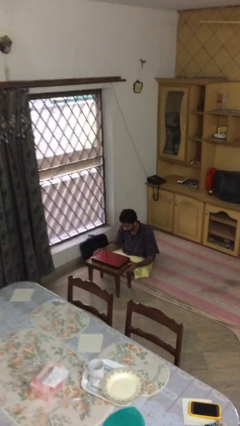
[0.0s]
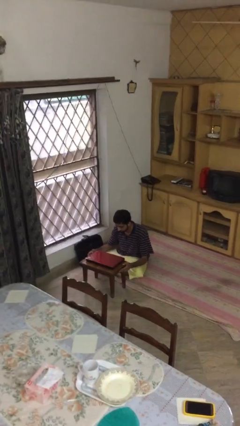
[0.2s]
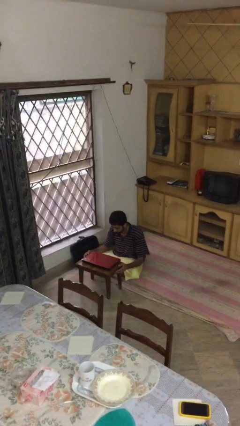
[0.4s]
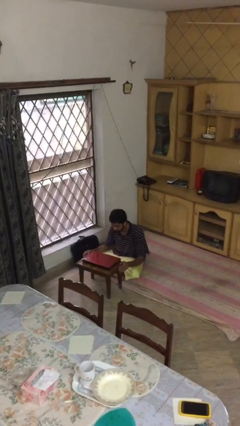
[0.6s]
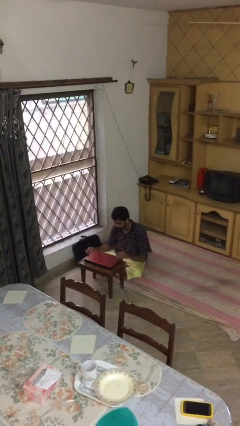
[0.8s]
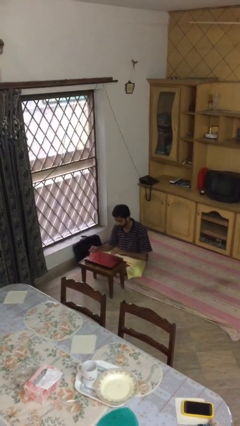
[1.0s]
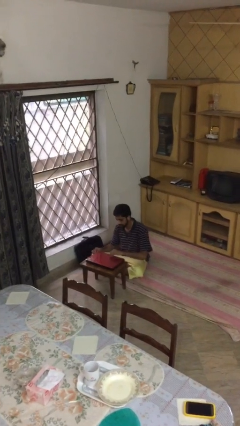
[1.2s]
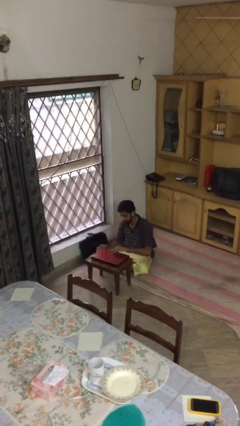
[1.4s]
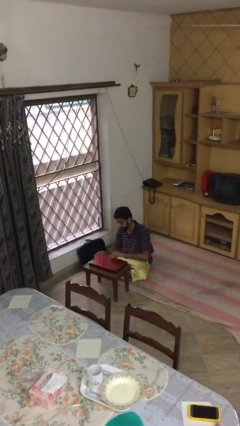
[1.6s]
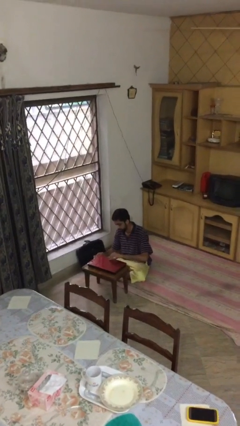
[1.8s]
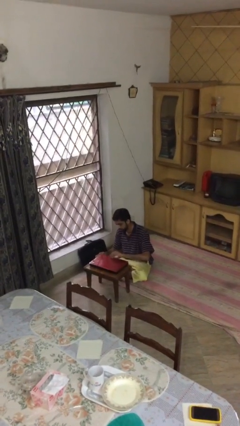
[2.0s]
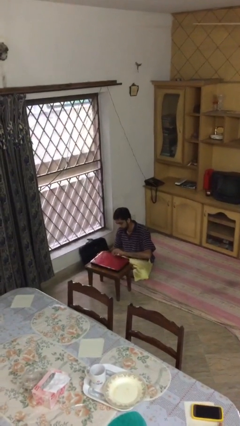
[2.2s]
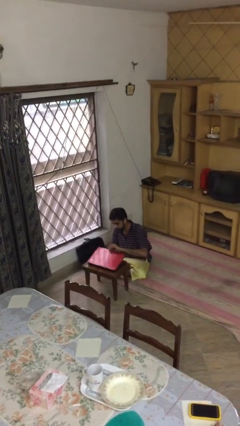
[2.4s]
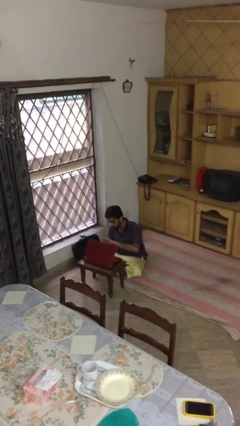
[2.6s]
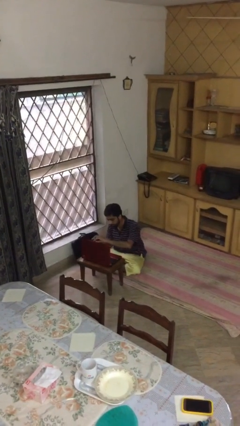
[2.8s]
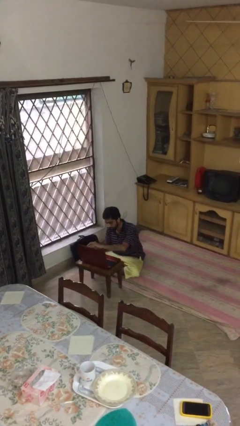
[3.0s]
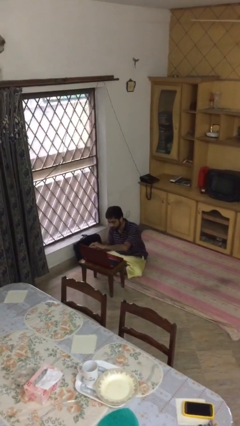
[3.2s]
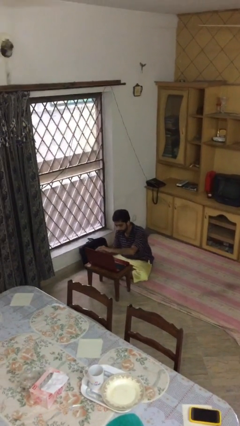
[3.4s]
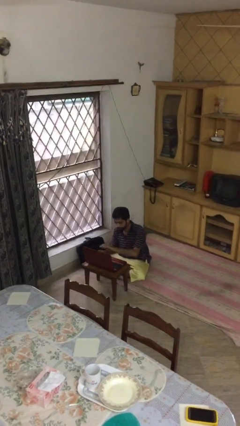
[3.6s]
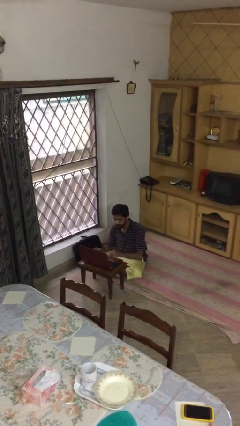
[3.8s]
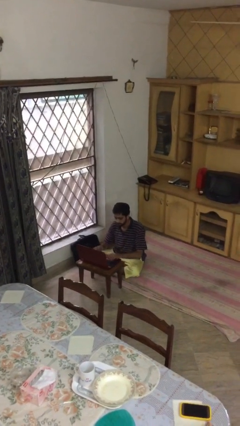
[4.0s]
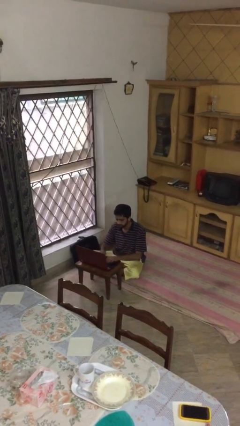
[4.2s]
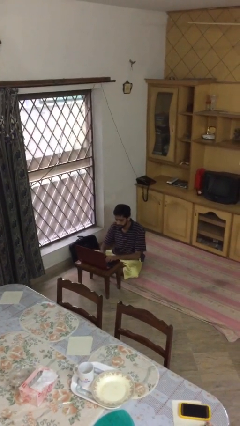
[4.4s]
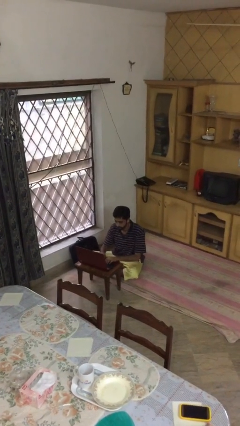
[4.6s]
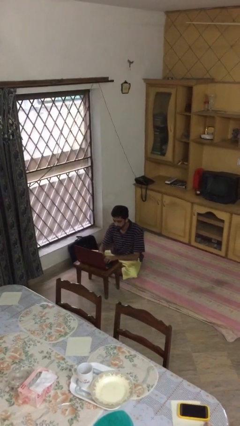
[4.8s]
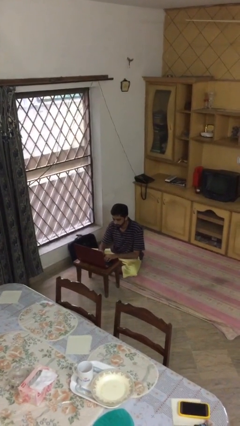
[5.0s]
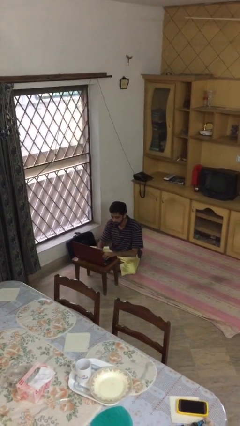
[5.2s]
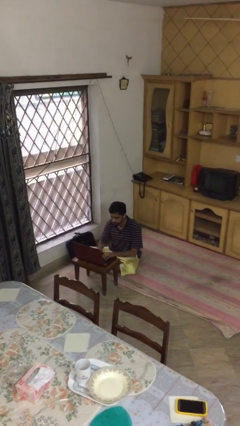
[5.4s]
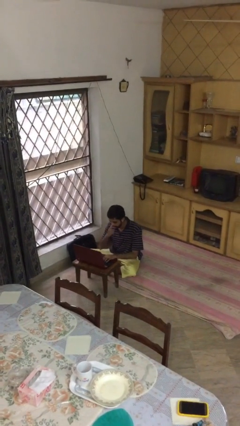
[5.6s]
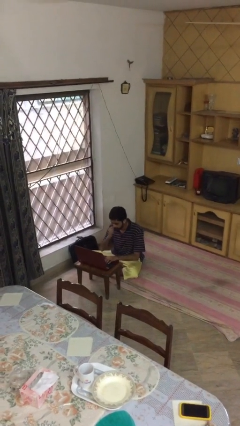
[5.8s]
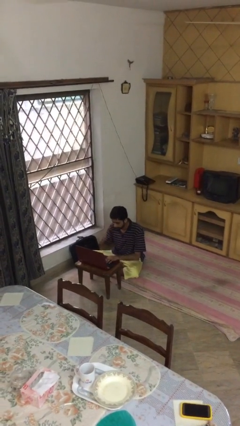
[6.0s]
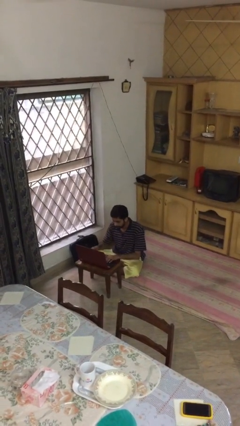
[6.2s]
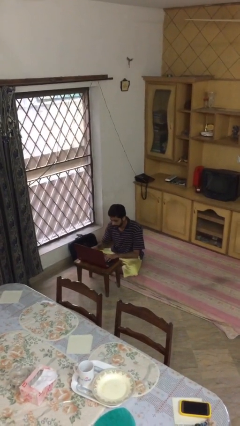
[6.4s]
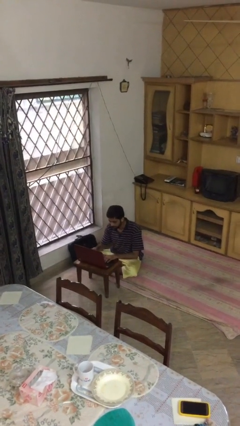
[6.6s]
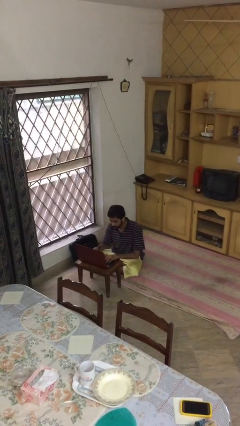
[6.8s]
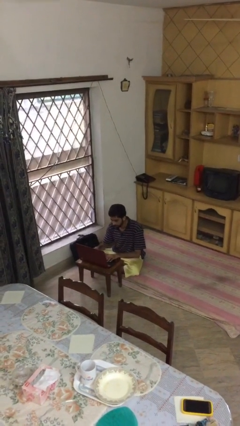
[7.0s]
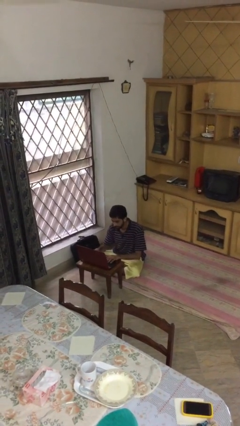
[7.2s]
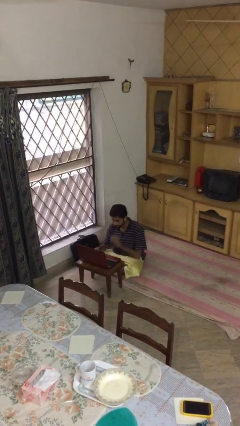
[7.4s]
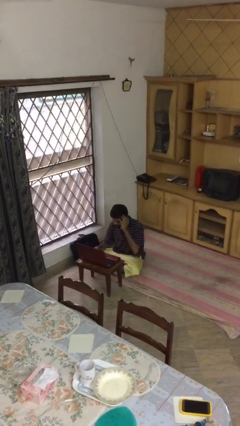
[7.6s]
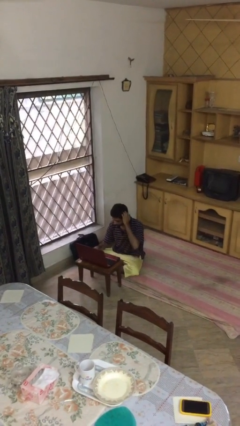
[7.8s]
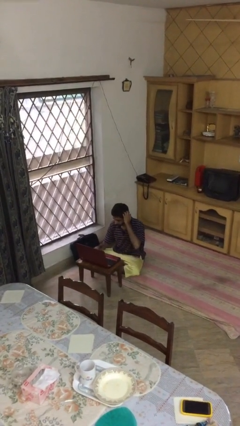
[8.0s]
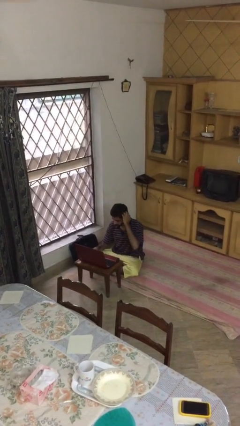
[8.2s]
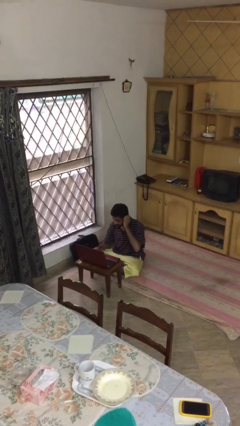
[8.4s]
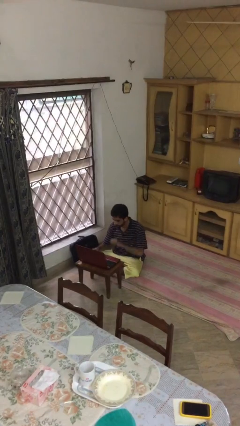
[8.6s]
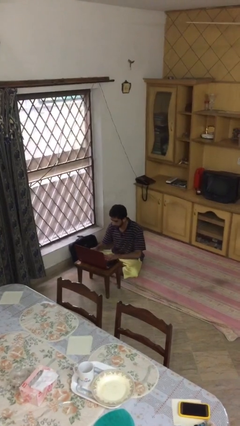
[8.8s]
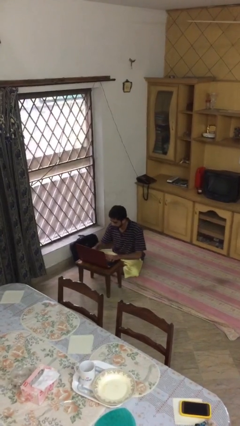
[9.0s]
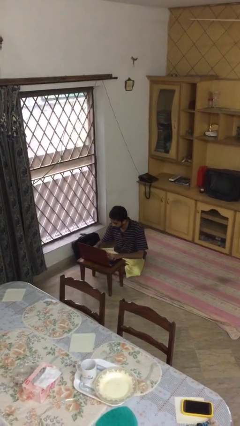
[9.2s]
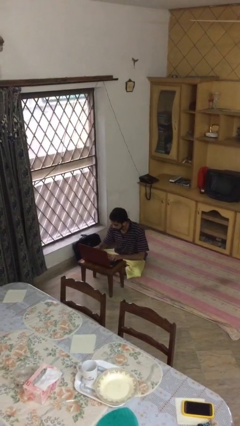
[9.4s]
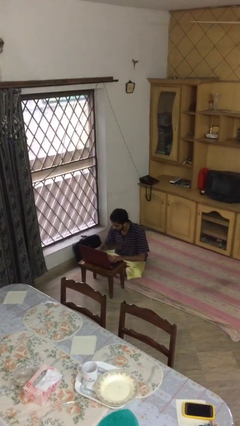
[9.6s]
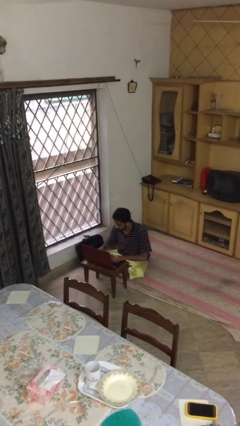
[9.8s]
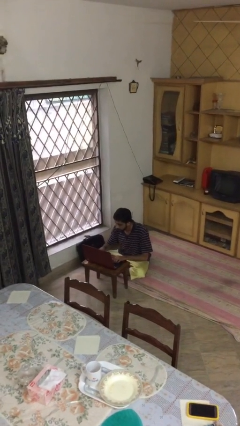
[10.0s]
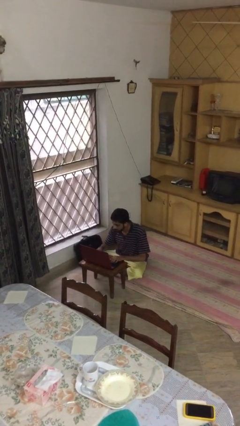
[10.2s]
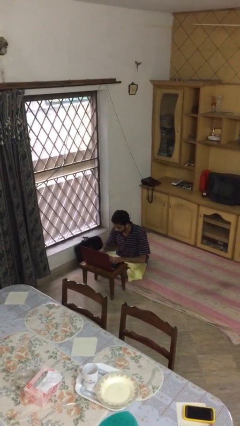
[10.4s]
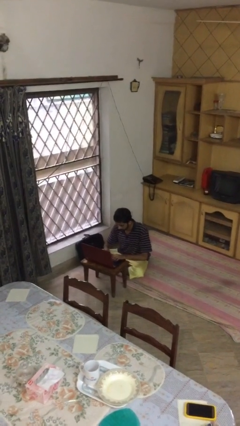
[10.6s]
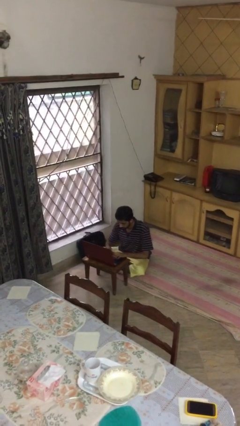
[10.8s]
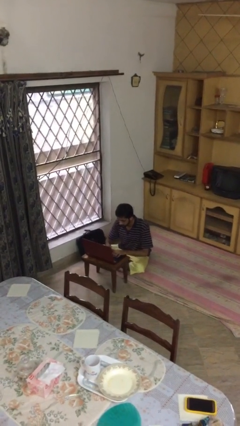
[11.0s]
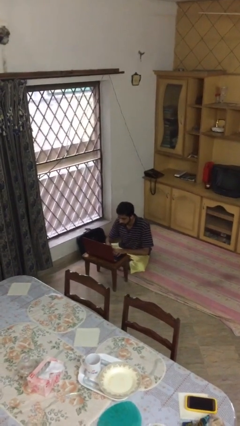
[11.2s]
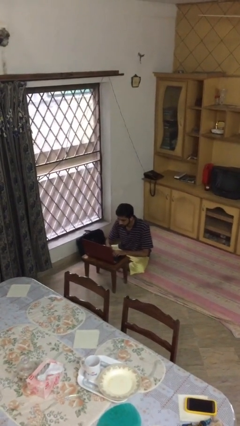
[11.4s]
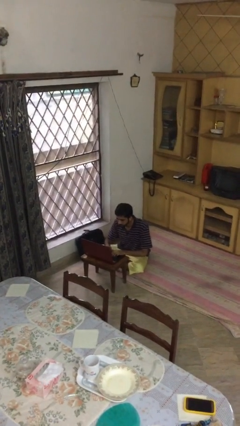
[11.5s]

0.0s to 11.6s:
person interacts with laptop

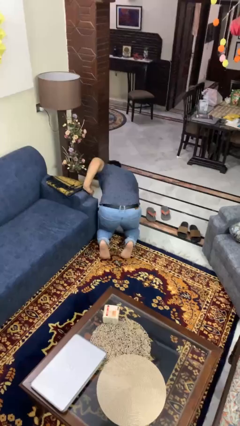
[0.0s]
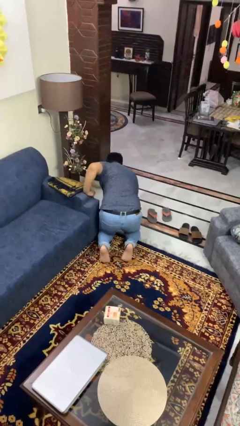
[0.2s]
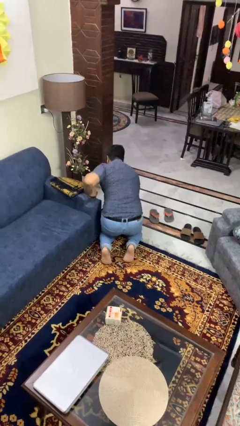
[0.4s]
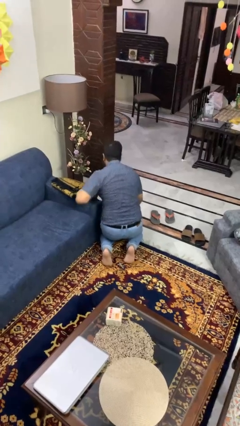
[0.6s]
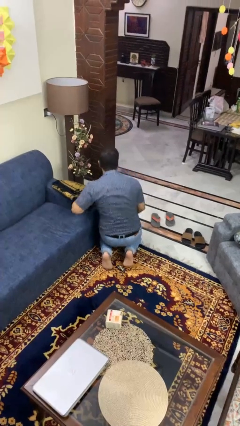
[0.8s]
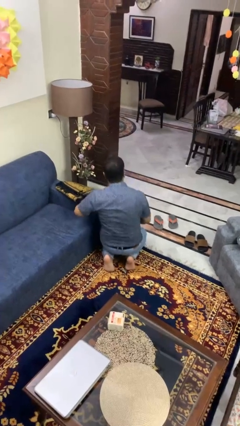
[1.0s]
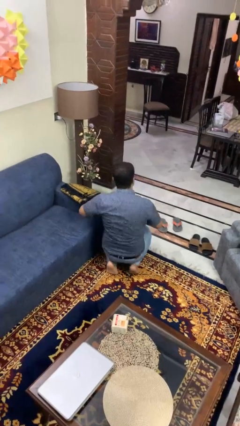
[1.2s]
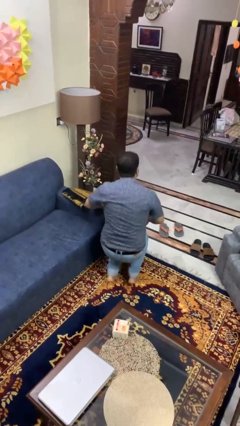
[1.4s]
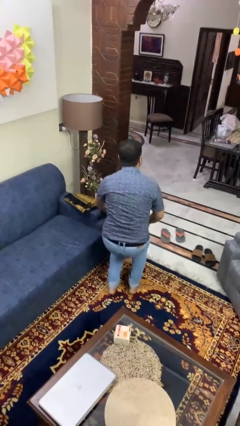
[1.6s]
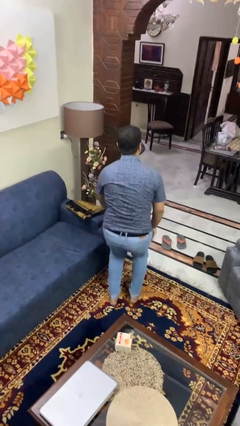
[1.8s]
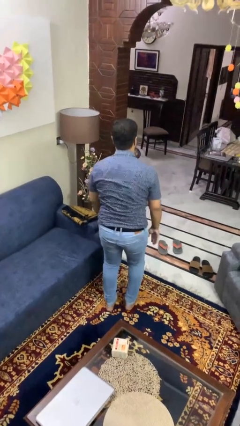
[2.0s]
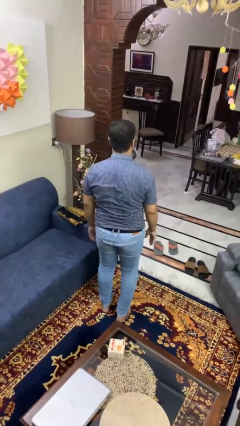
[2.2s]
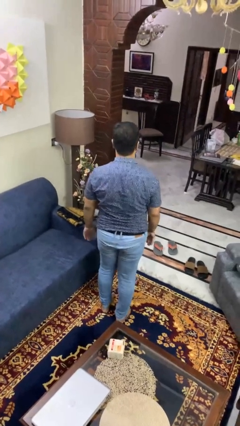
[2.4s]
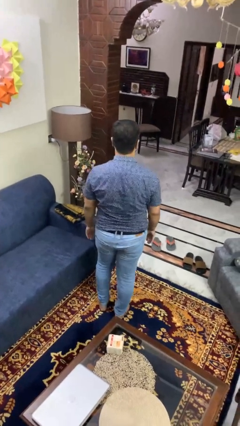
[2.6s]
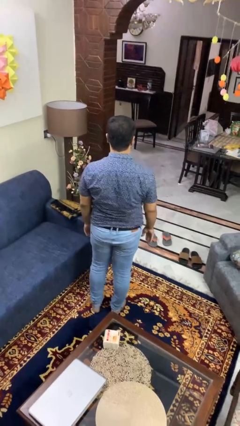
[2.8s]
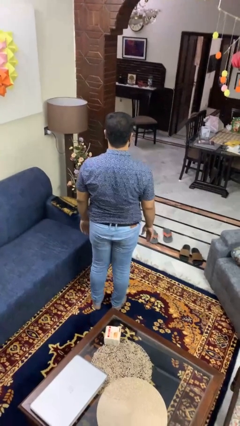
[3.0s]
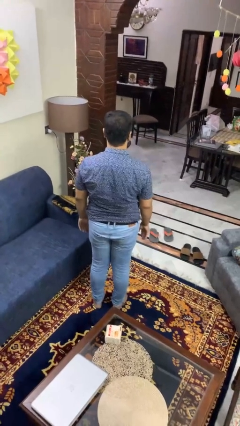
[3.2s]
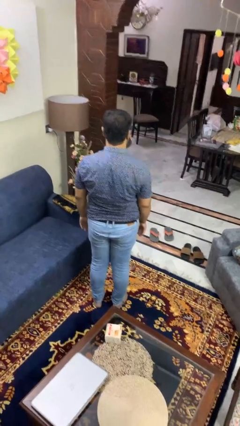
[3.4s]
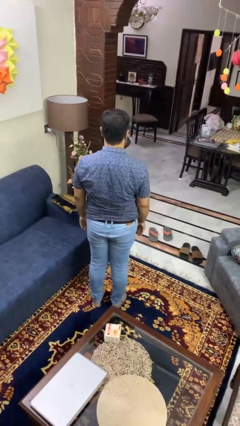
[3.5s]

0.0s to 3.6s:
person stands up from floor

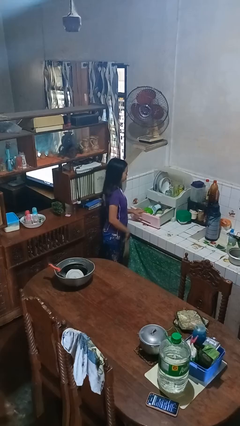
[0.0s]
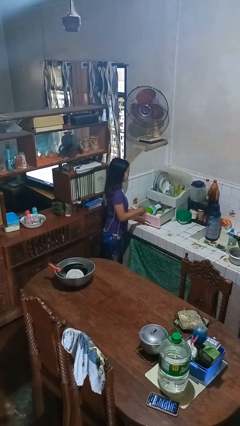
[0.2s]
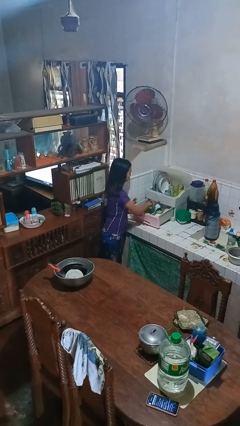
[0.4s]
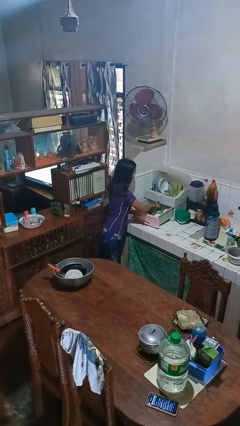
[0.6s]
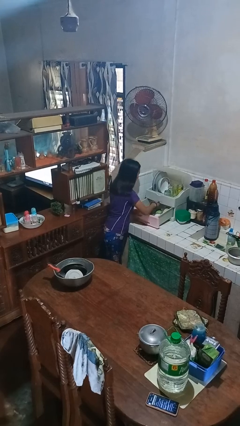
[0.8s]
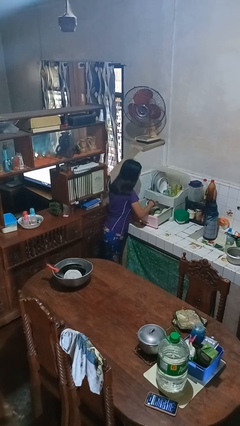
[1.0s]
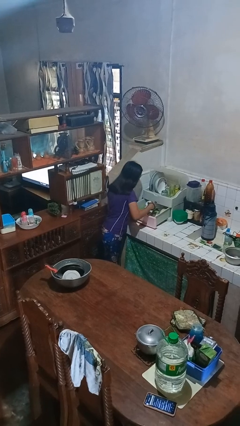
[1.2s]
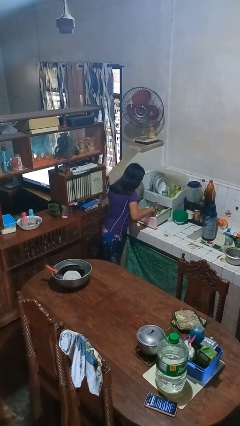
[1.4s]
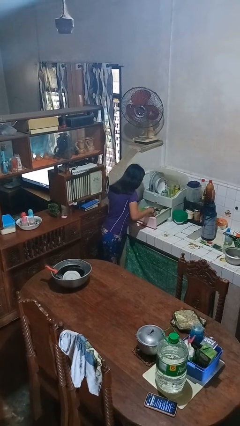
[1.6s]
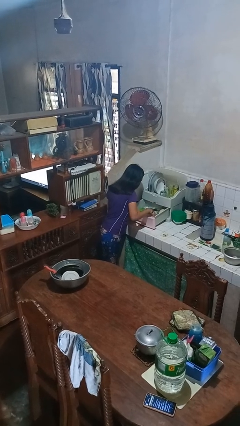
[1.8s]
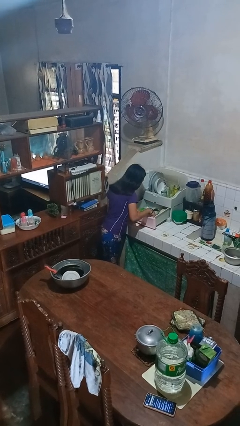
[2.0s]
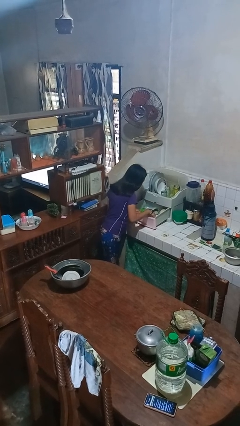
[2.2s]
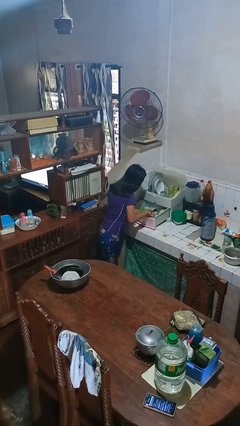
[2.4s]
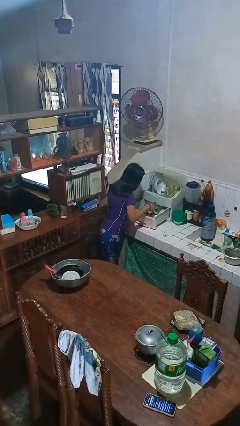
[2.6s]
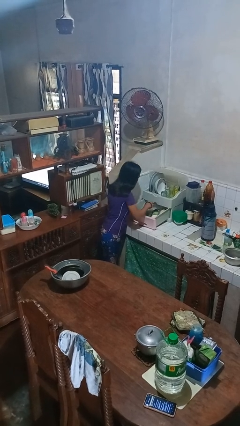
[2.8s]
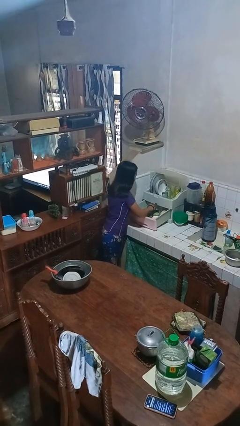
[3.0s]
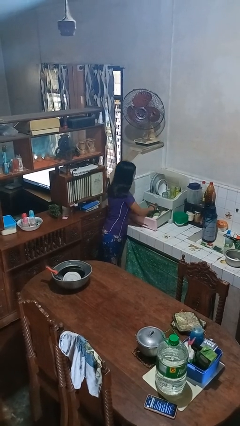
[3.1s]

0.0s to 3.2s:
person searches in kitchen drawer
